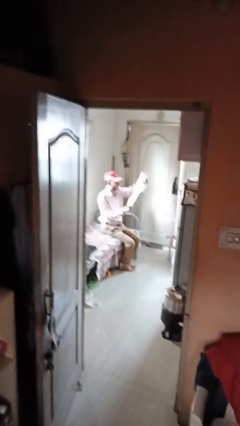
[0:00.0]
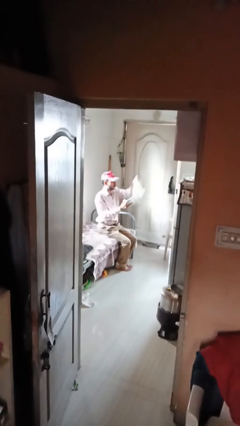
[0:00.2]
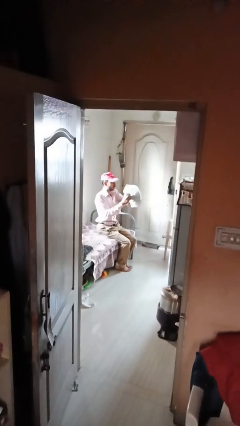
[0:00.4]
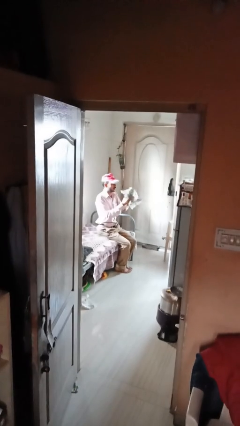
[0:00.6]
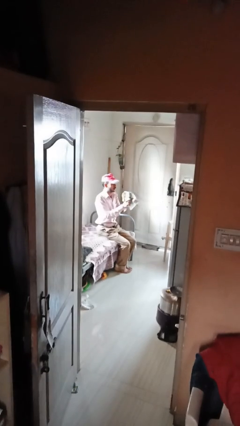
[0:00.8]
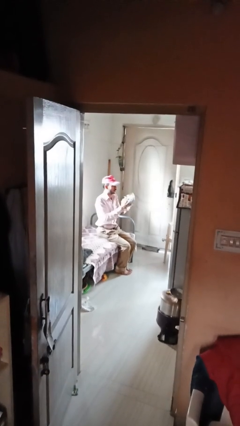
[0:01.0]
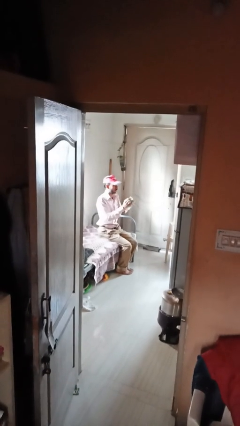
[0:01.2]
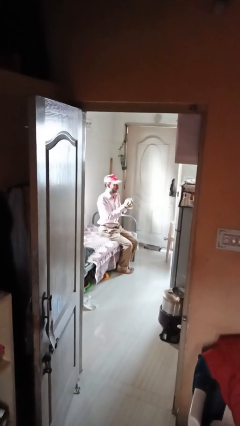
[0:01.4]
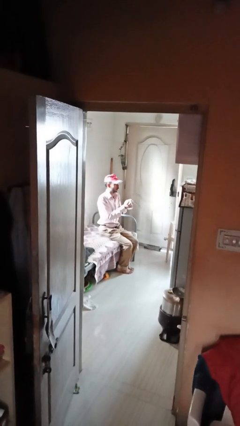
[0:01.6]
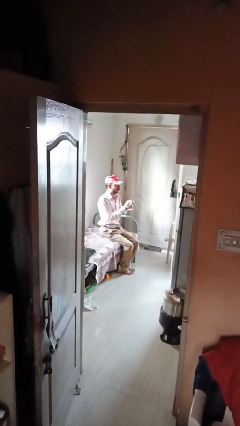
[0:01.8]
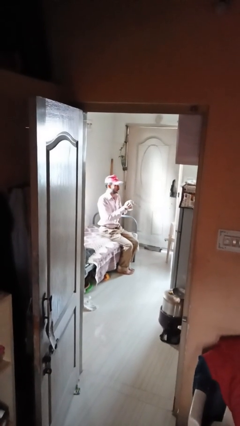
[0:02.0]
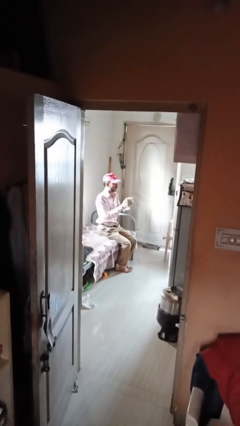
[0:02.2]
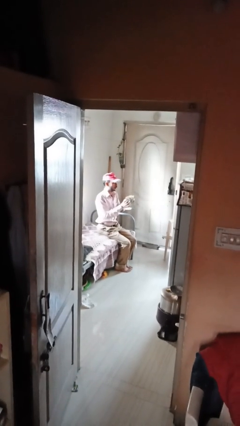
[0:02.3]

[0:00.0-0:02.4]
person crumples paper

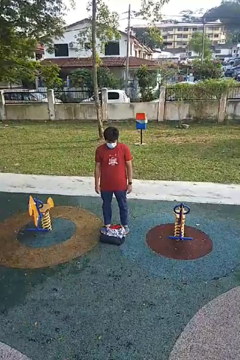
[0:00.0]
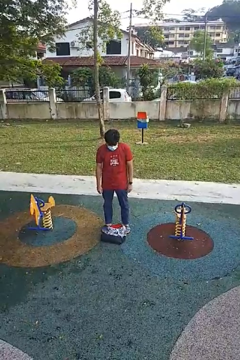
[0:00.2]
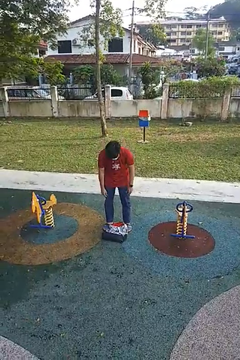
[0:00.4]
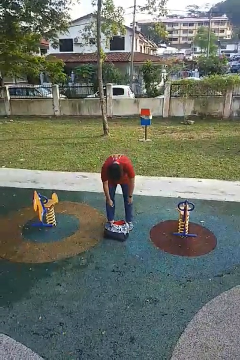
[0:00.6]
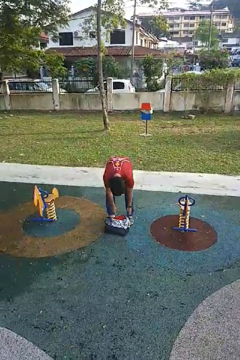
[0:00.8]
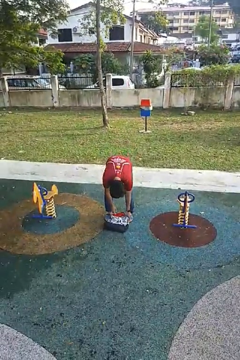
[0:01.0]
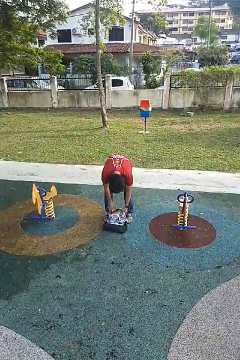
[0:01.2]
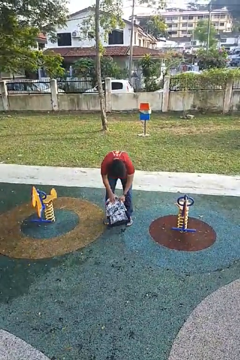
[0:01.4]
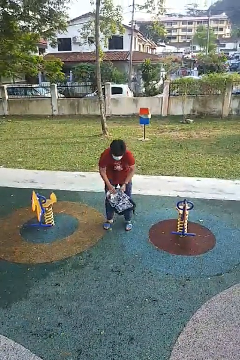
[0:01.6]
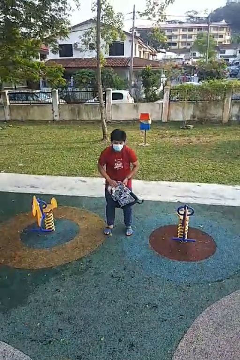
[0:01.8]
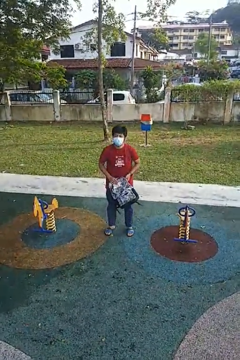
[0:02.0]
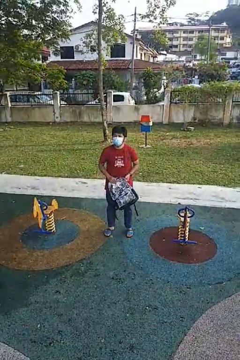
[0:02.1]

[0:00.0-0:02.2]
person picks up object from floor

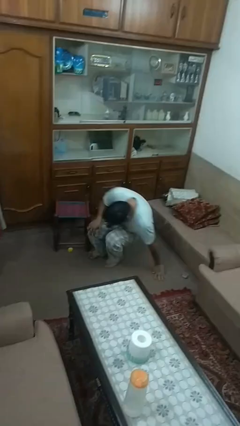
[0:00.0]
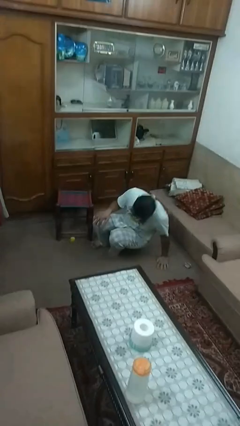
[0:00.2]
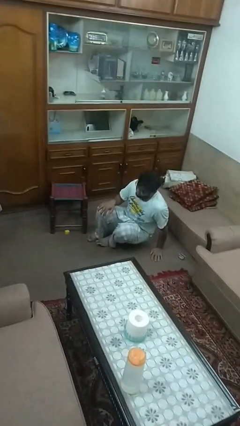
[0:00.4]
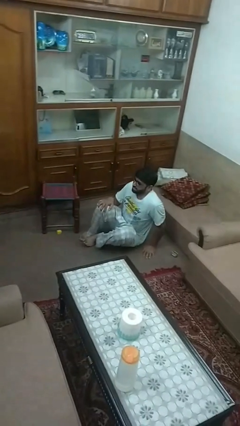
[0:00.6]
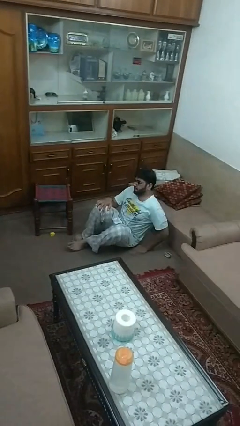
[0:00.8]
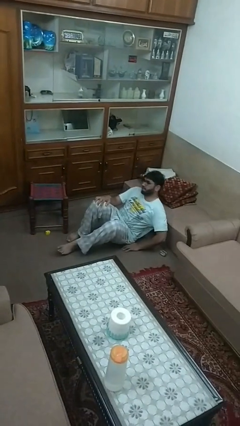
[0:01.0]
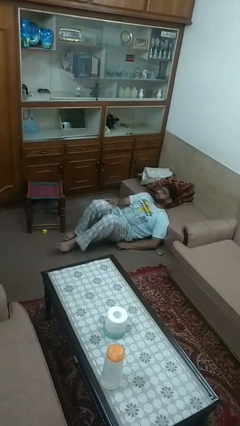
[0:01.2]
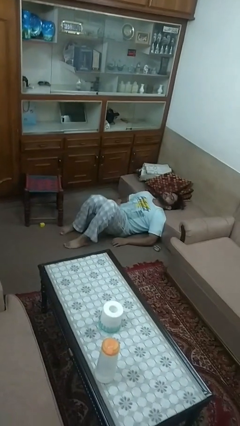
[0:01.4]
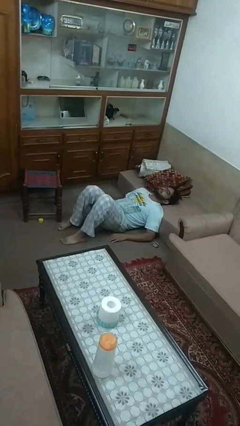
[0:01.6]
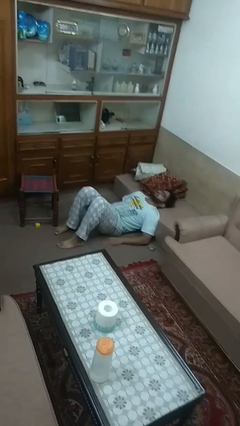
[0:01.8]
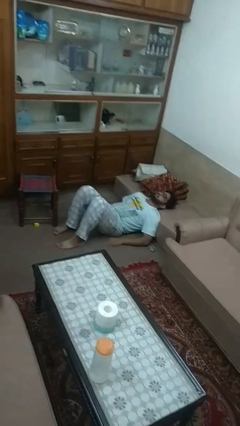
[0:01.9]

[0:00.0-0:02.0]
person lies down on floor

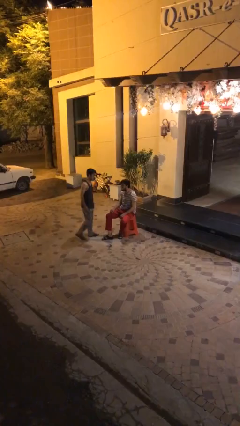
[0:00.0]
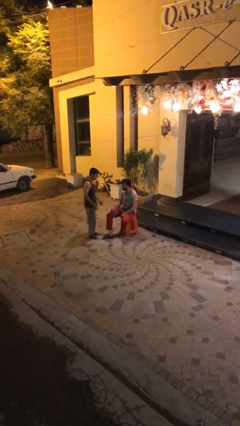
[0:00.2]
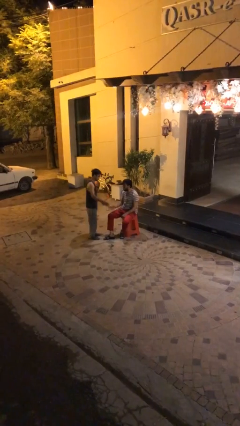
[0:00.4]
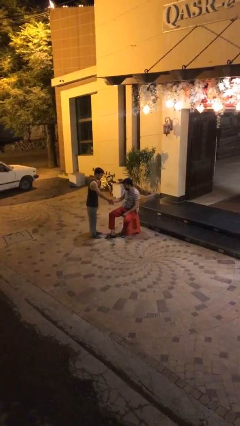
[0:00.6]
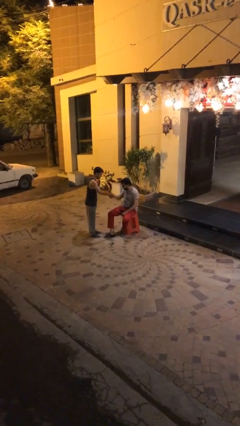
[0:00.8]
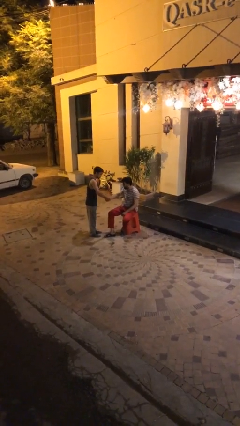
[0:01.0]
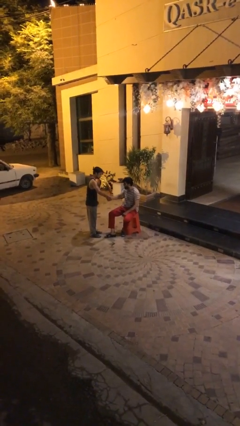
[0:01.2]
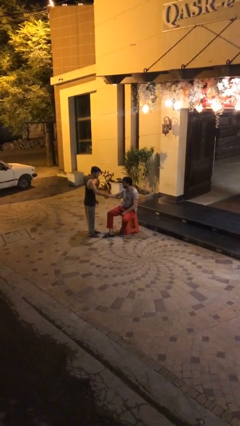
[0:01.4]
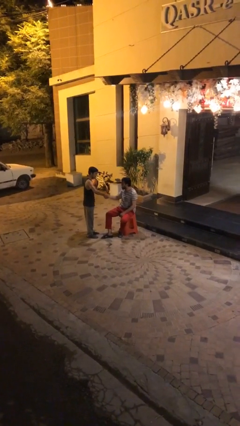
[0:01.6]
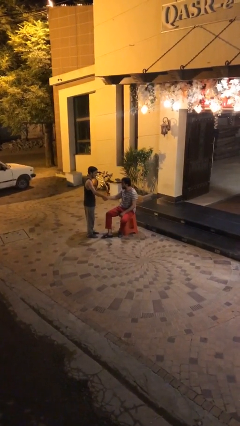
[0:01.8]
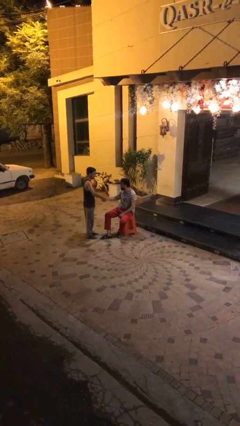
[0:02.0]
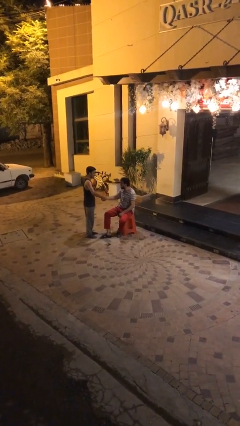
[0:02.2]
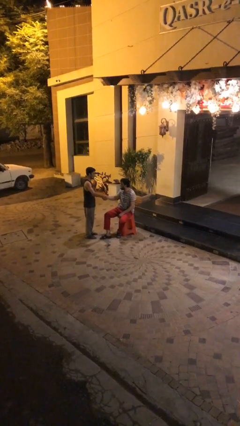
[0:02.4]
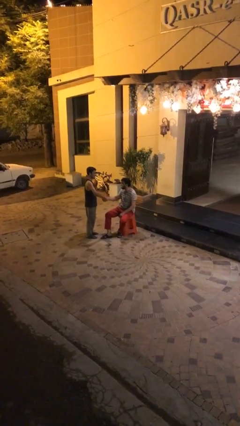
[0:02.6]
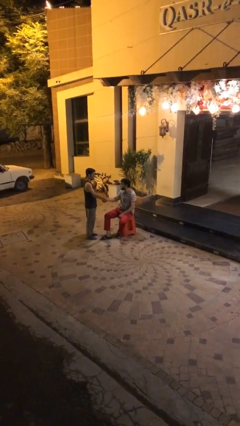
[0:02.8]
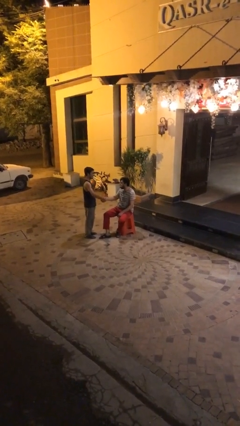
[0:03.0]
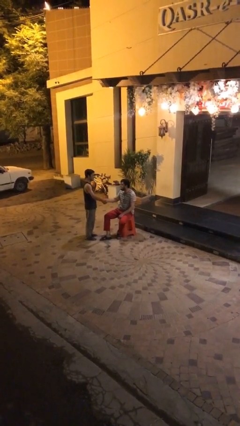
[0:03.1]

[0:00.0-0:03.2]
person shakes hand

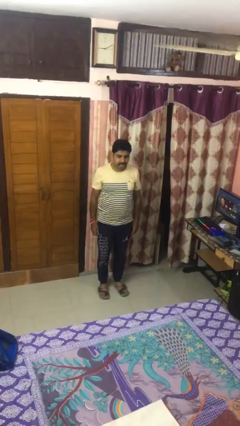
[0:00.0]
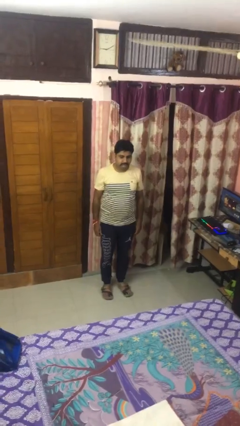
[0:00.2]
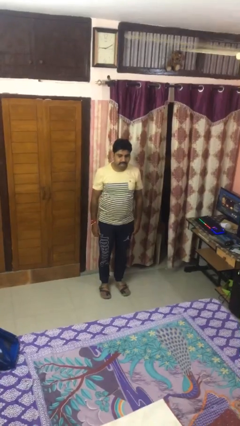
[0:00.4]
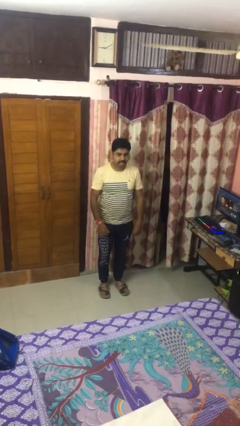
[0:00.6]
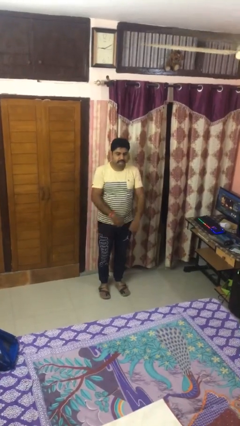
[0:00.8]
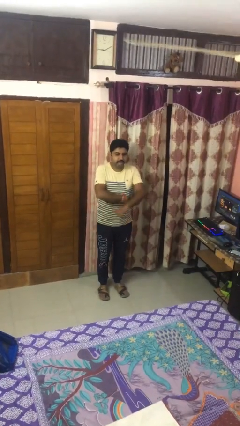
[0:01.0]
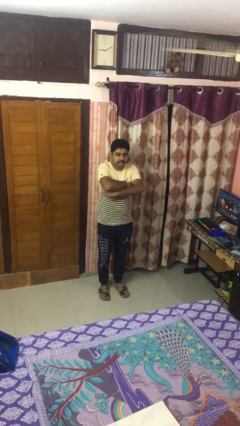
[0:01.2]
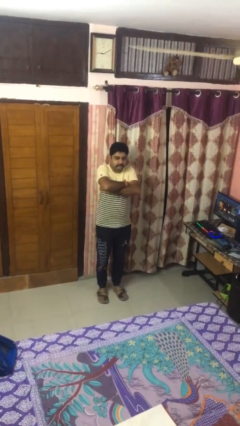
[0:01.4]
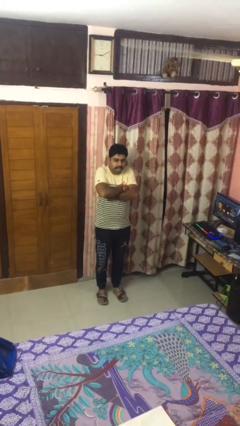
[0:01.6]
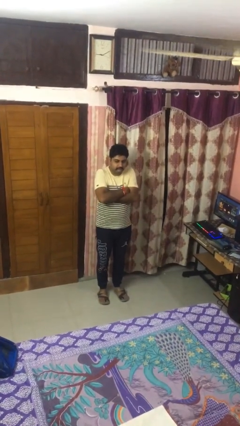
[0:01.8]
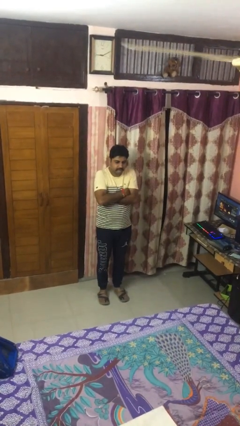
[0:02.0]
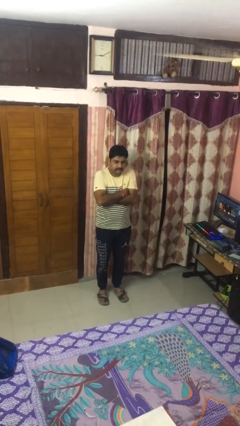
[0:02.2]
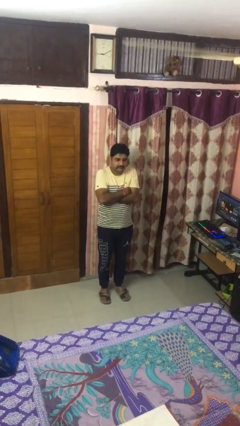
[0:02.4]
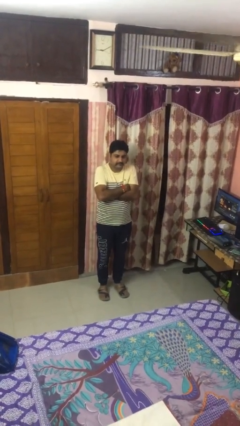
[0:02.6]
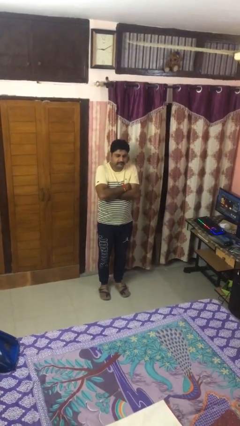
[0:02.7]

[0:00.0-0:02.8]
person crosses arms

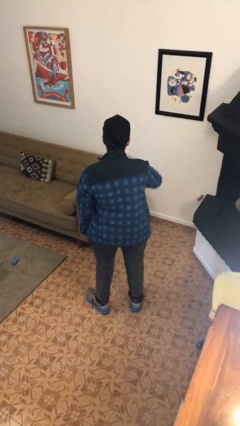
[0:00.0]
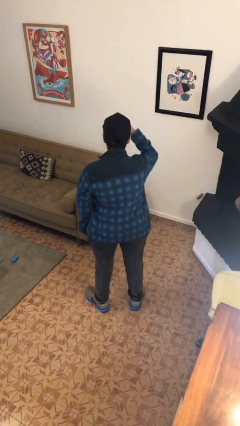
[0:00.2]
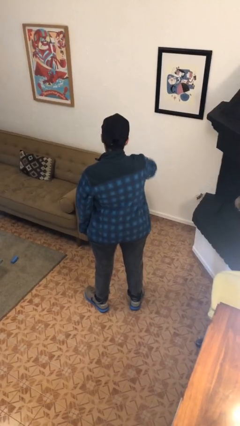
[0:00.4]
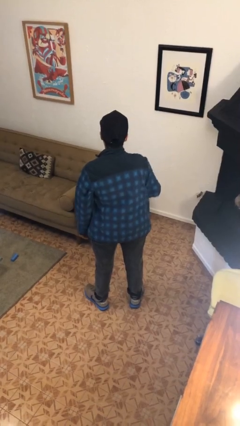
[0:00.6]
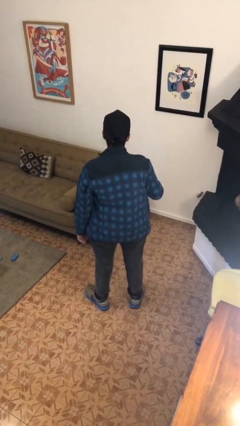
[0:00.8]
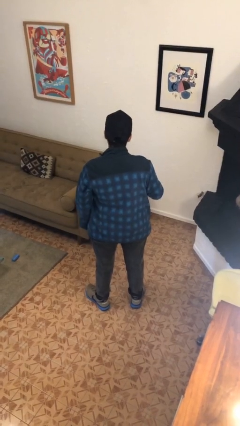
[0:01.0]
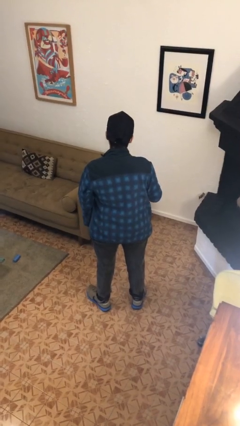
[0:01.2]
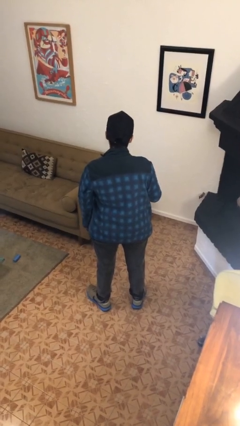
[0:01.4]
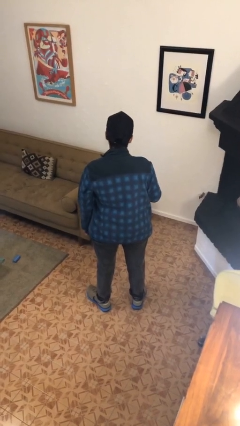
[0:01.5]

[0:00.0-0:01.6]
person gestures swipe down

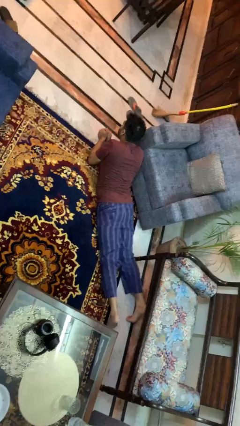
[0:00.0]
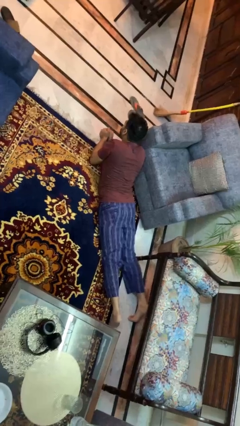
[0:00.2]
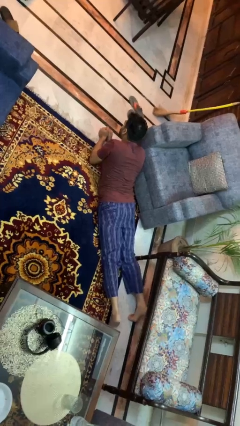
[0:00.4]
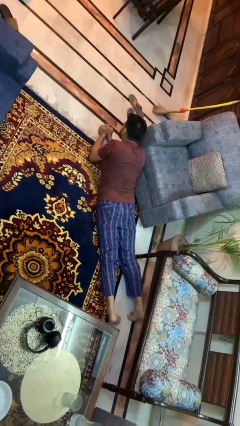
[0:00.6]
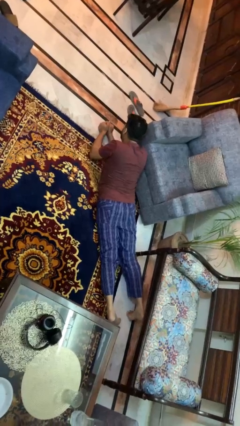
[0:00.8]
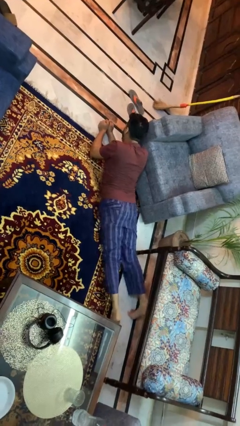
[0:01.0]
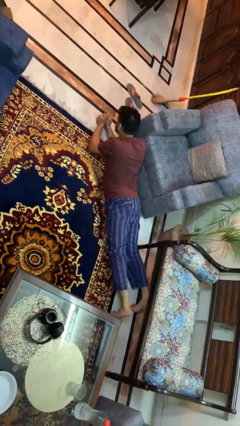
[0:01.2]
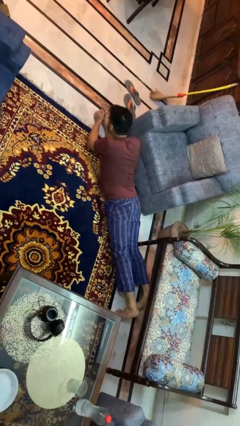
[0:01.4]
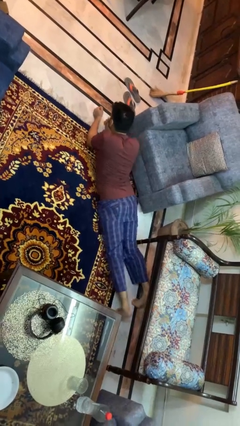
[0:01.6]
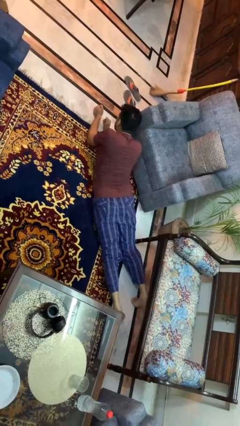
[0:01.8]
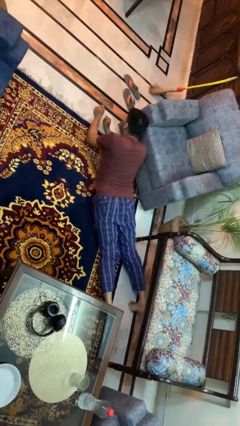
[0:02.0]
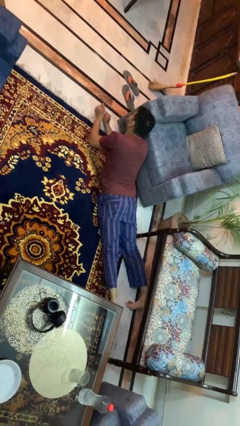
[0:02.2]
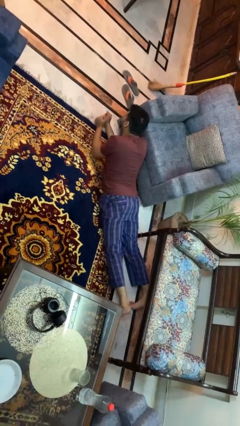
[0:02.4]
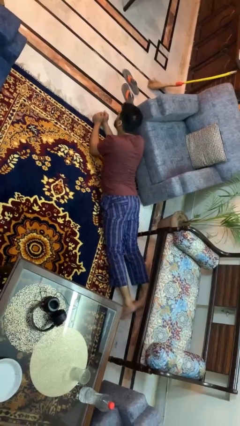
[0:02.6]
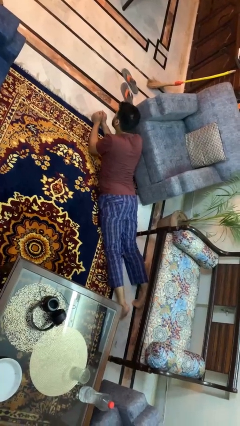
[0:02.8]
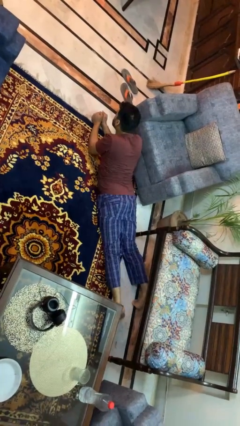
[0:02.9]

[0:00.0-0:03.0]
person crawls

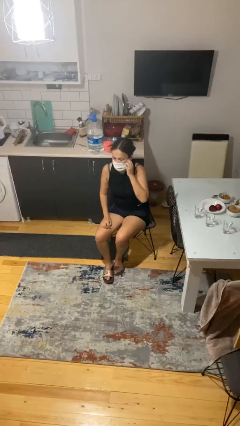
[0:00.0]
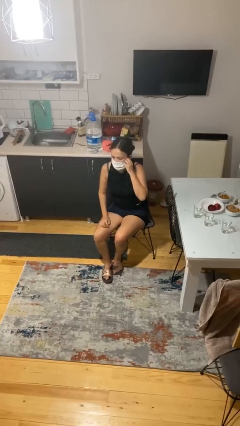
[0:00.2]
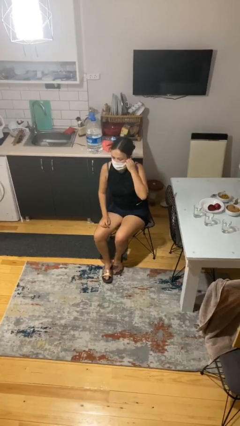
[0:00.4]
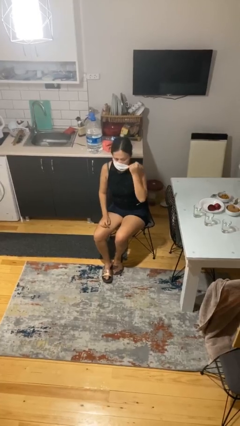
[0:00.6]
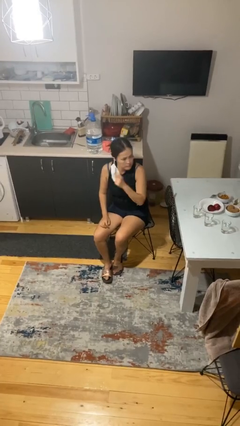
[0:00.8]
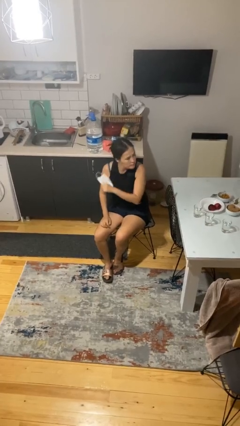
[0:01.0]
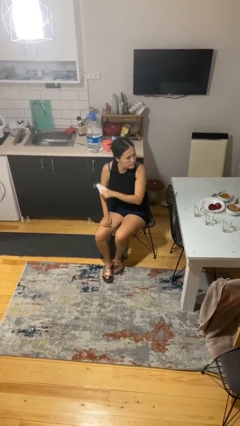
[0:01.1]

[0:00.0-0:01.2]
person takes off facemask
